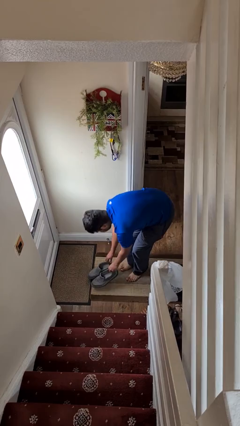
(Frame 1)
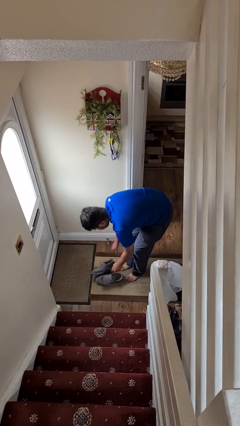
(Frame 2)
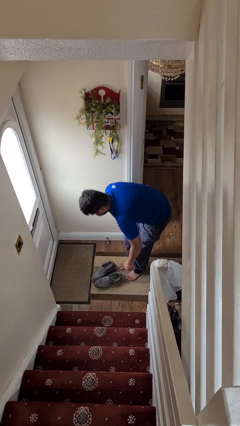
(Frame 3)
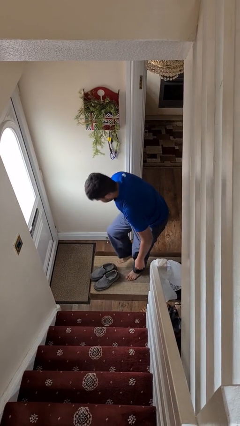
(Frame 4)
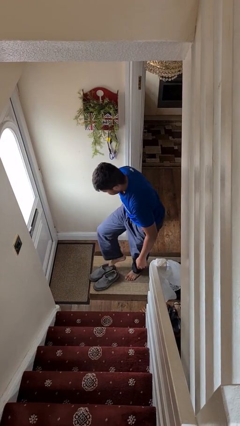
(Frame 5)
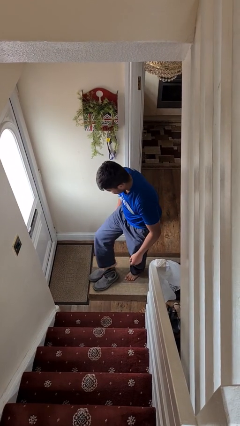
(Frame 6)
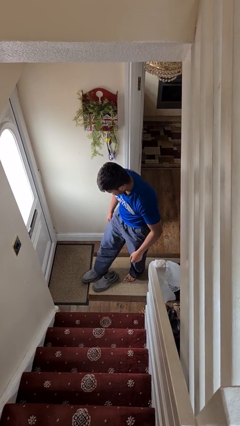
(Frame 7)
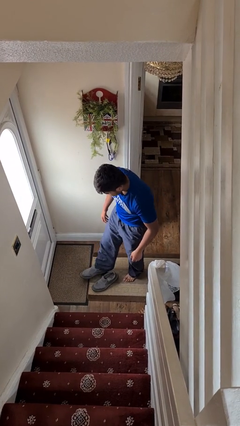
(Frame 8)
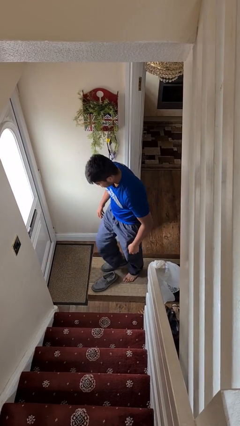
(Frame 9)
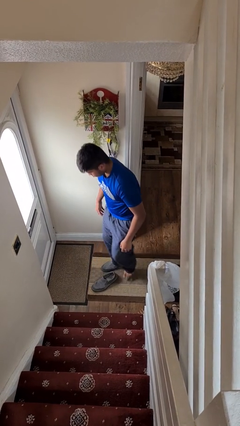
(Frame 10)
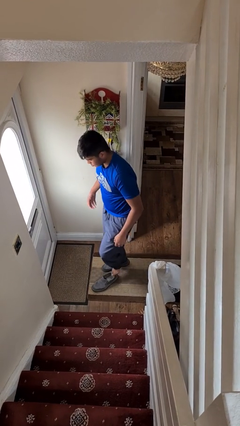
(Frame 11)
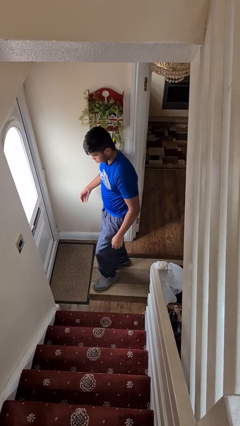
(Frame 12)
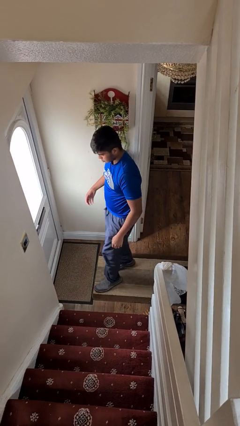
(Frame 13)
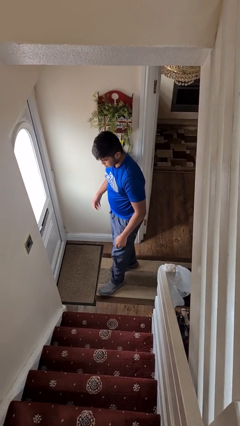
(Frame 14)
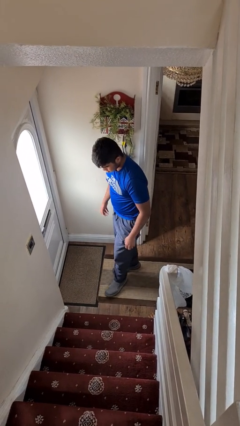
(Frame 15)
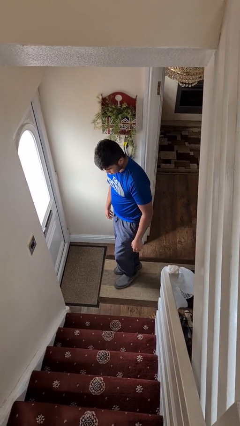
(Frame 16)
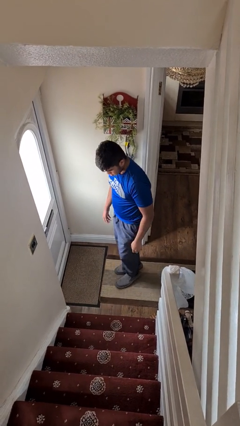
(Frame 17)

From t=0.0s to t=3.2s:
person puts on shoes

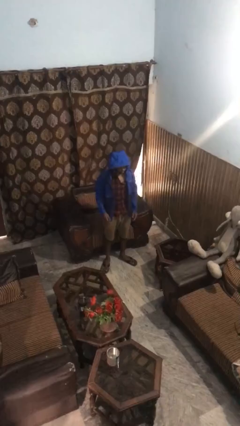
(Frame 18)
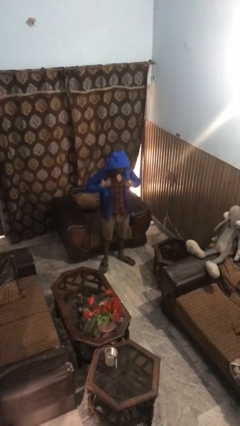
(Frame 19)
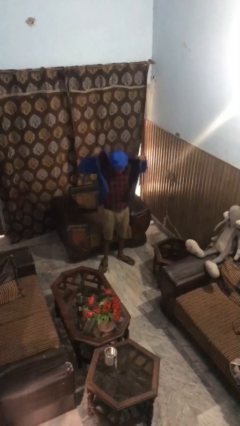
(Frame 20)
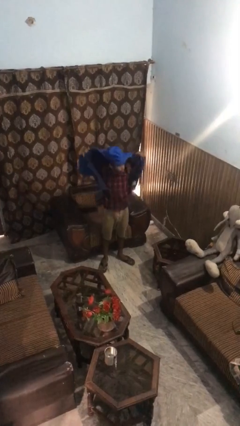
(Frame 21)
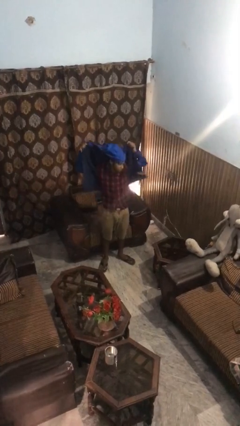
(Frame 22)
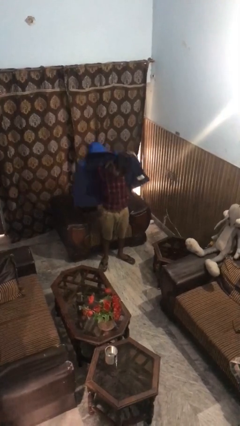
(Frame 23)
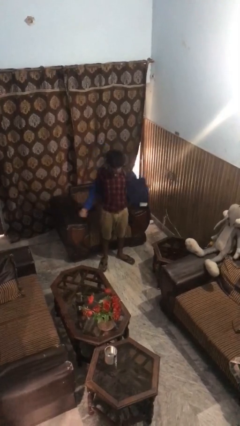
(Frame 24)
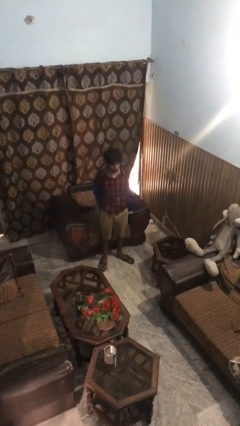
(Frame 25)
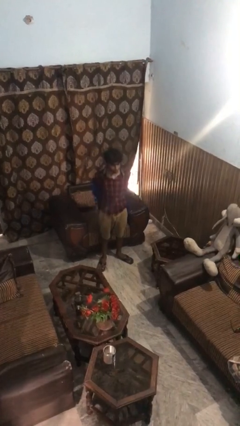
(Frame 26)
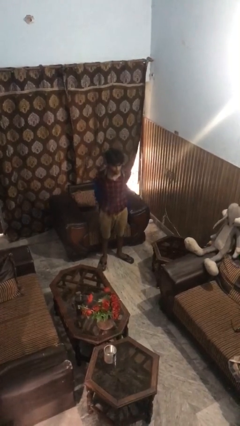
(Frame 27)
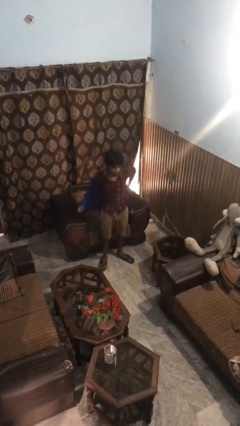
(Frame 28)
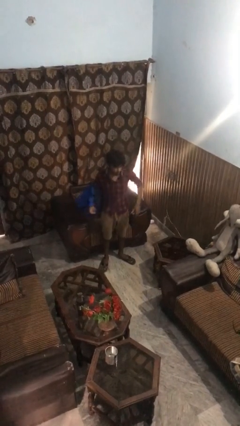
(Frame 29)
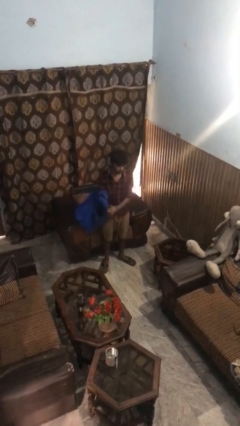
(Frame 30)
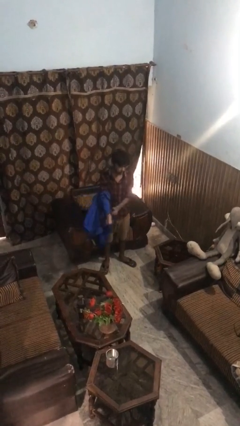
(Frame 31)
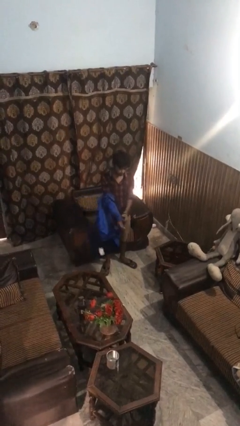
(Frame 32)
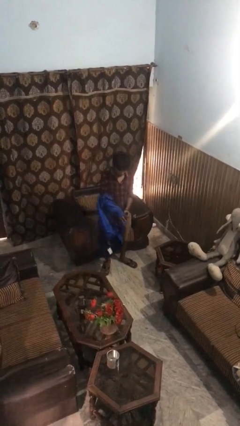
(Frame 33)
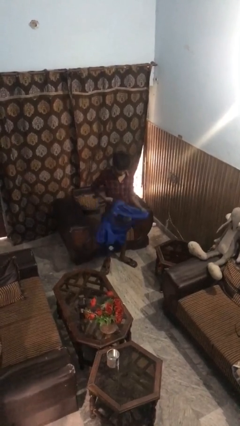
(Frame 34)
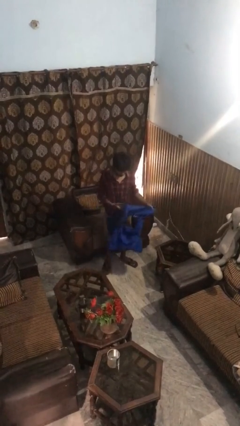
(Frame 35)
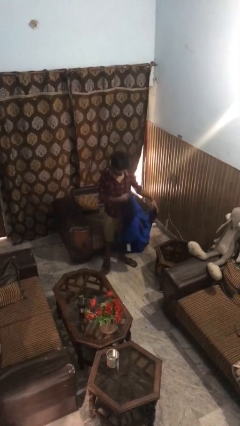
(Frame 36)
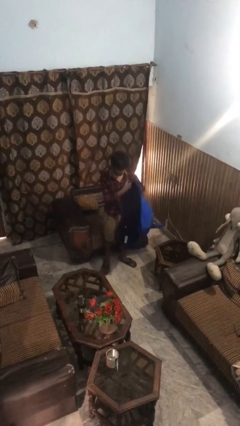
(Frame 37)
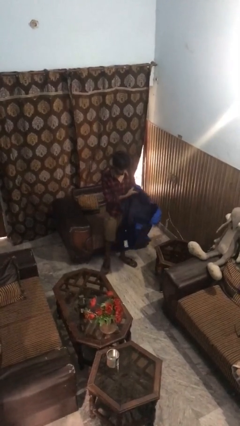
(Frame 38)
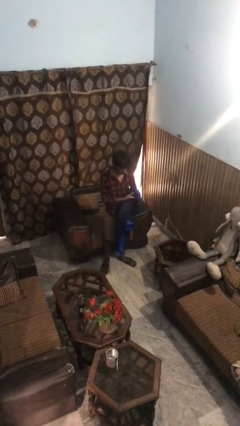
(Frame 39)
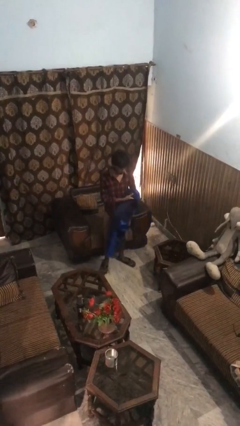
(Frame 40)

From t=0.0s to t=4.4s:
person takes off hoodie

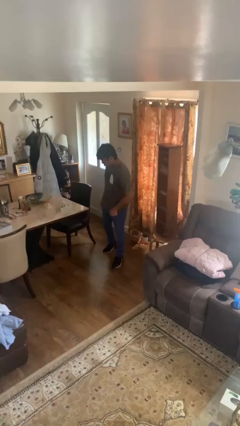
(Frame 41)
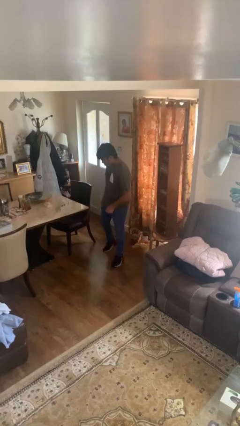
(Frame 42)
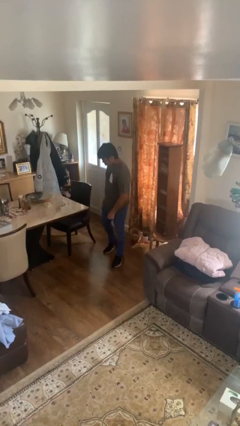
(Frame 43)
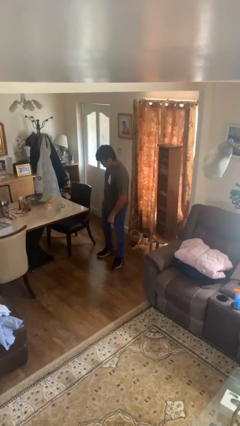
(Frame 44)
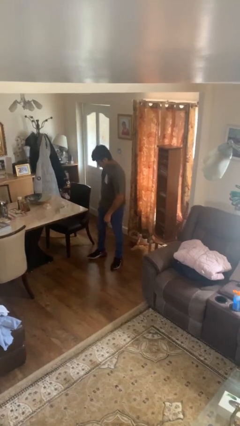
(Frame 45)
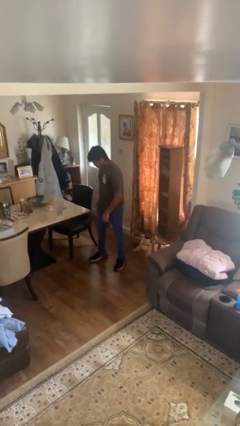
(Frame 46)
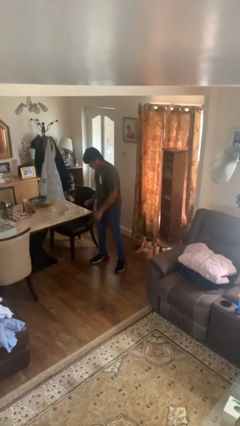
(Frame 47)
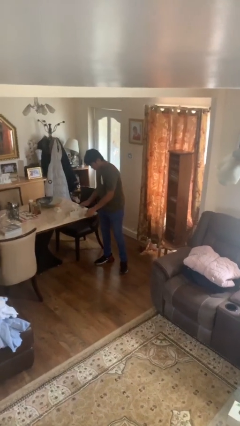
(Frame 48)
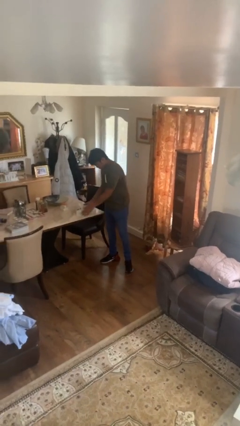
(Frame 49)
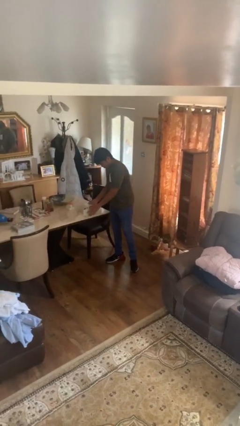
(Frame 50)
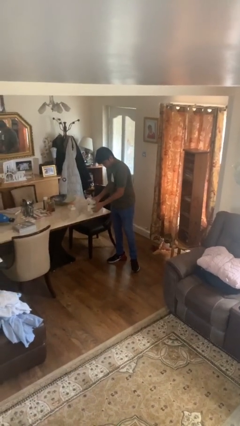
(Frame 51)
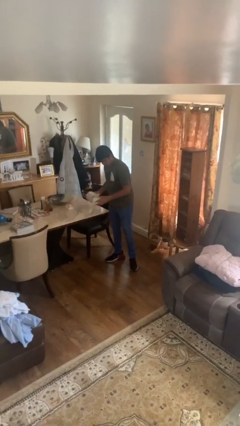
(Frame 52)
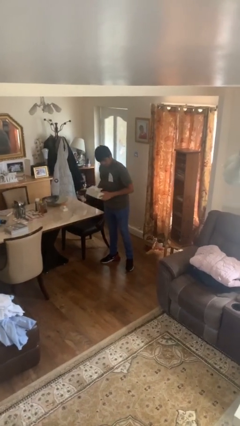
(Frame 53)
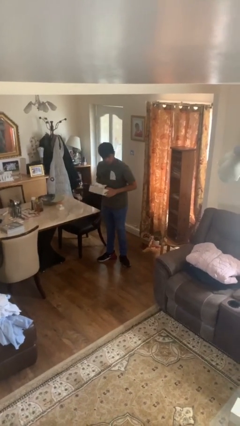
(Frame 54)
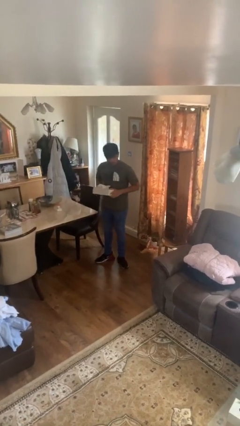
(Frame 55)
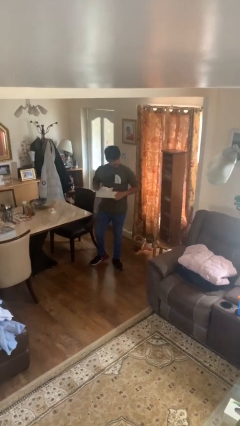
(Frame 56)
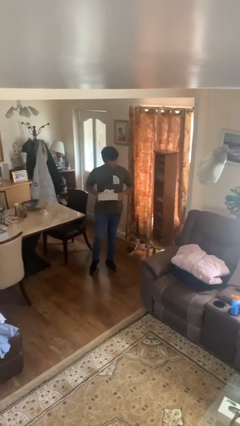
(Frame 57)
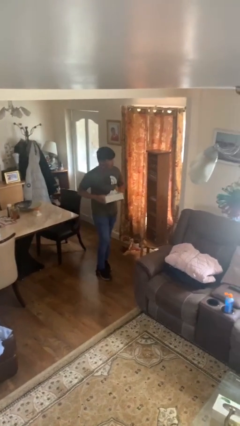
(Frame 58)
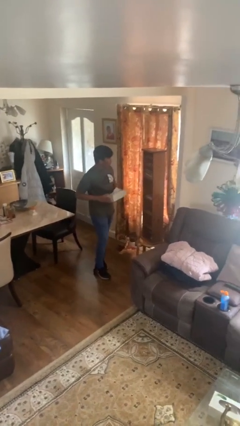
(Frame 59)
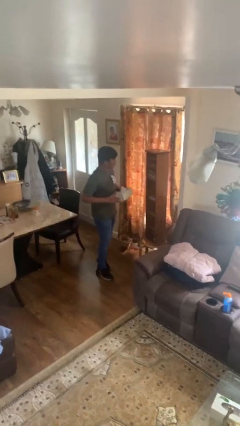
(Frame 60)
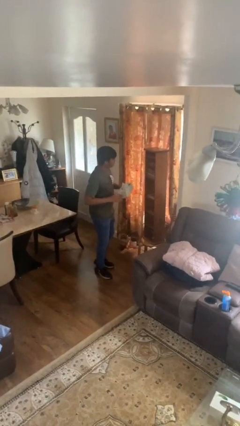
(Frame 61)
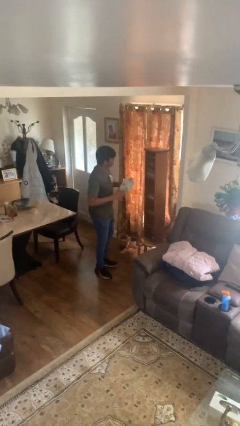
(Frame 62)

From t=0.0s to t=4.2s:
person picks up object from table

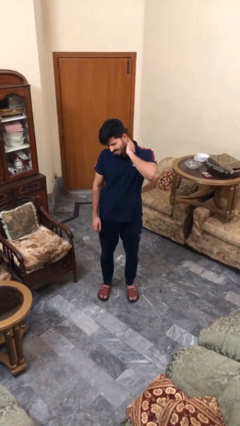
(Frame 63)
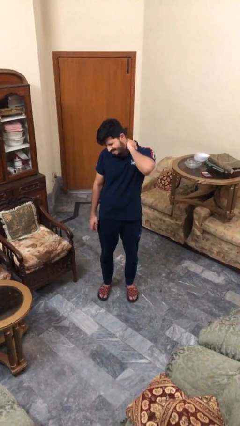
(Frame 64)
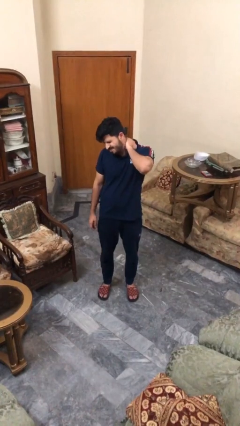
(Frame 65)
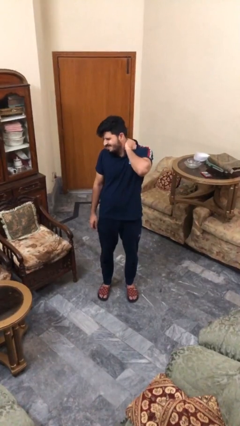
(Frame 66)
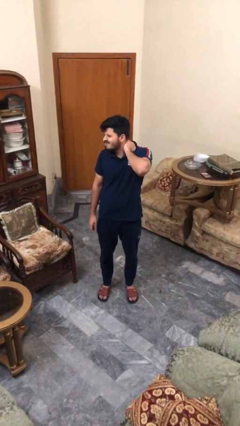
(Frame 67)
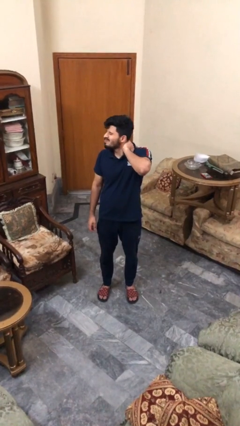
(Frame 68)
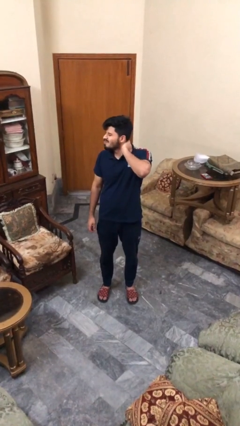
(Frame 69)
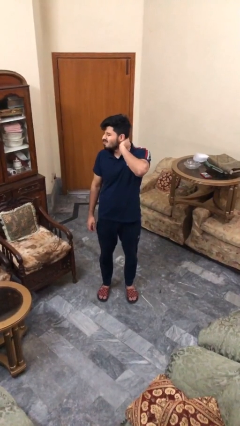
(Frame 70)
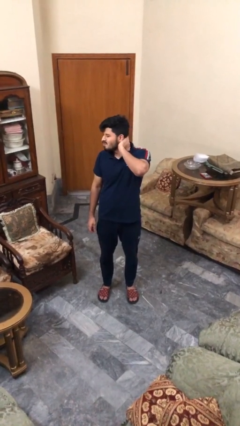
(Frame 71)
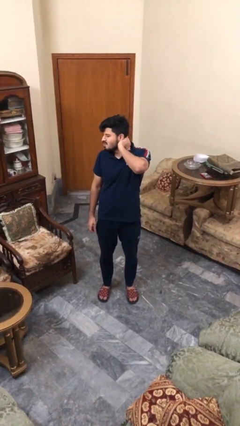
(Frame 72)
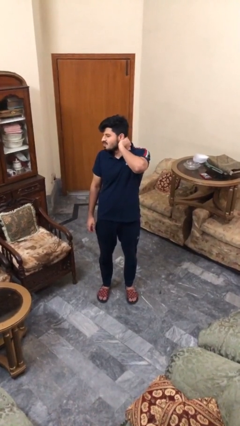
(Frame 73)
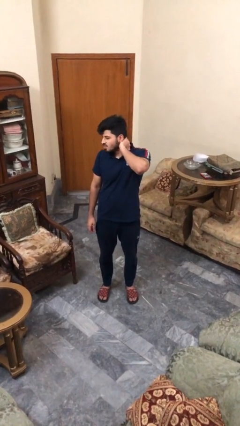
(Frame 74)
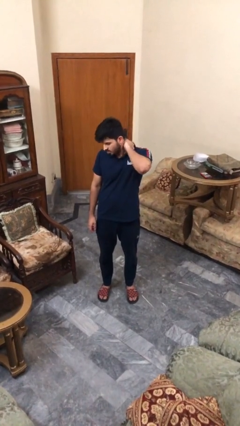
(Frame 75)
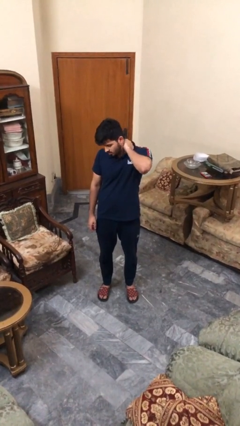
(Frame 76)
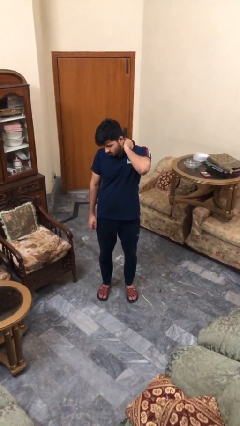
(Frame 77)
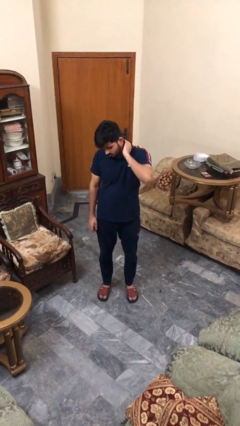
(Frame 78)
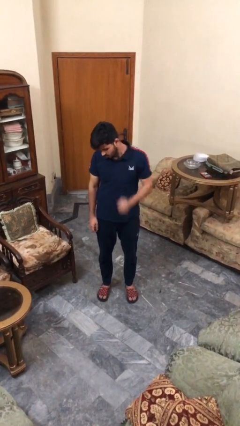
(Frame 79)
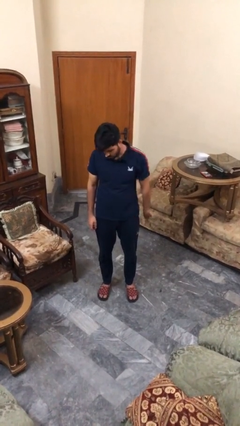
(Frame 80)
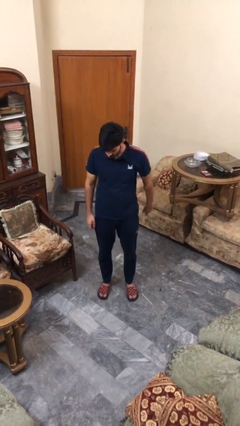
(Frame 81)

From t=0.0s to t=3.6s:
person rubs neck

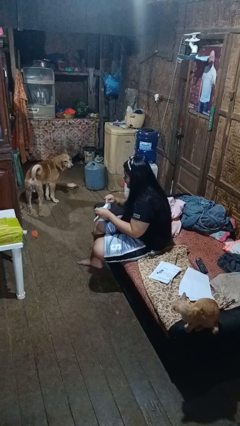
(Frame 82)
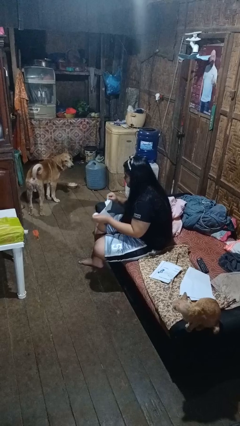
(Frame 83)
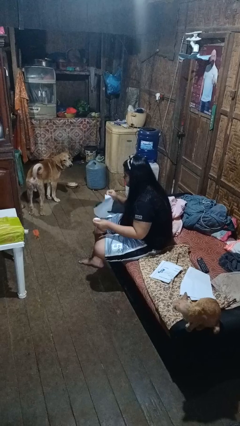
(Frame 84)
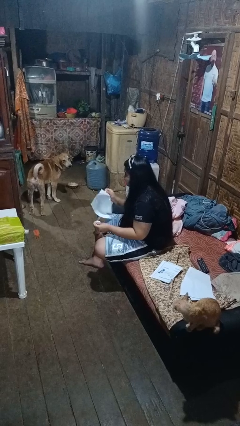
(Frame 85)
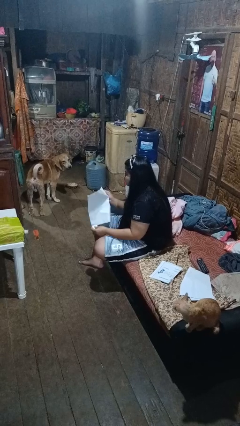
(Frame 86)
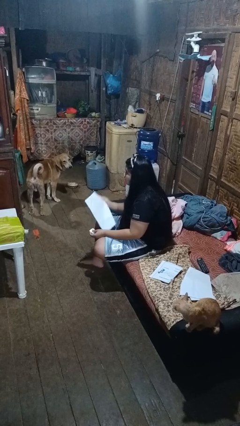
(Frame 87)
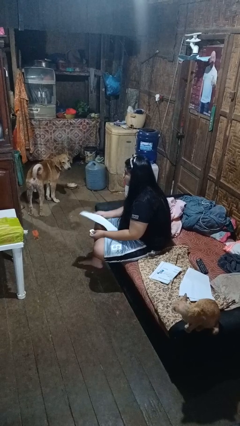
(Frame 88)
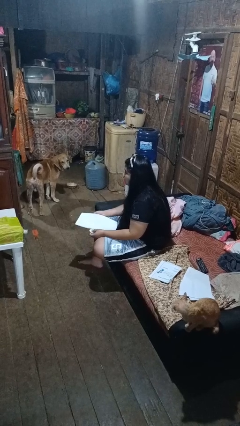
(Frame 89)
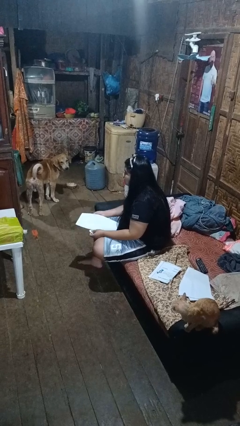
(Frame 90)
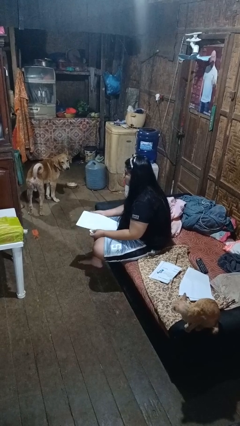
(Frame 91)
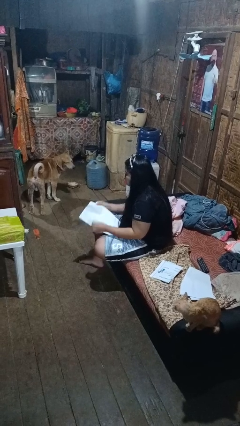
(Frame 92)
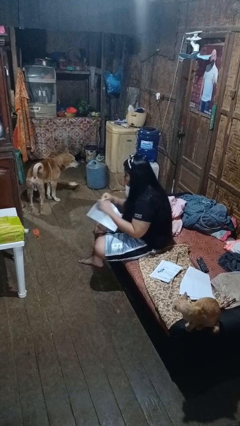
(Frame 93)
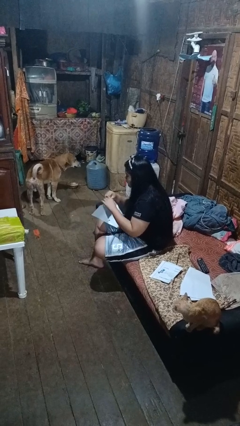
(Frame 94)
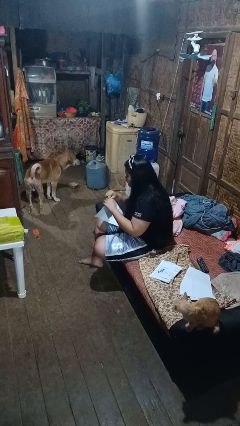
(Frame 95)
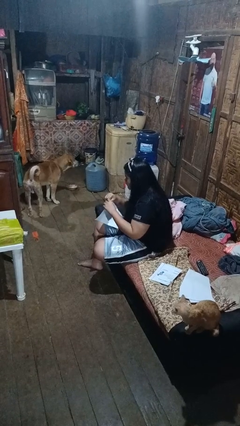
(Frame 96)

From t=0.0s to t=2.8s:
person tears paper
